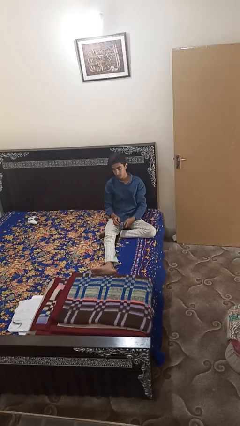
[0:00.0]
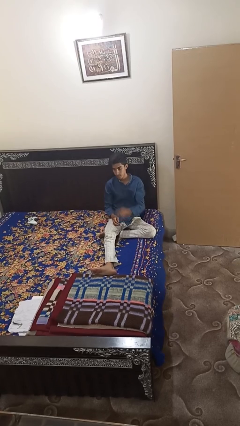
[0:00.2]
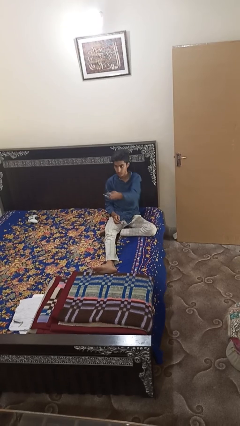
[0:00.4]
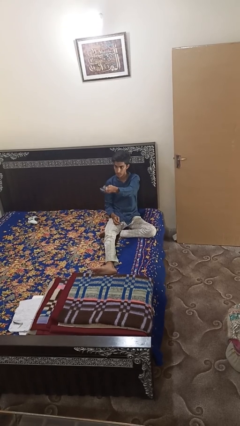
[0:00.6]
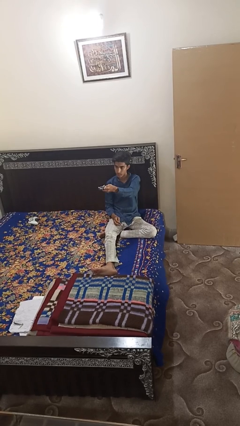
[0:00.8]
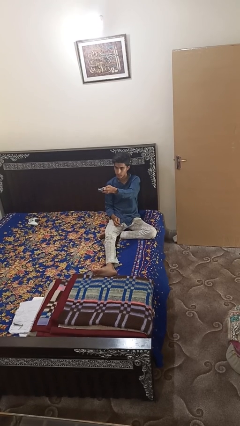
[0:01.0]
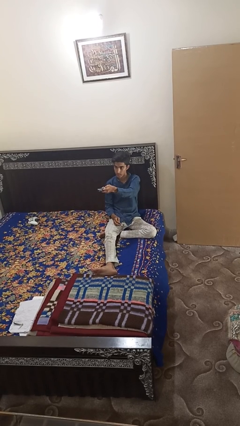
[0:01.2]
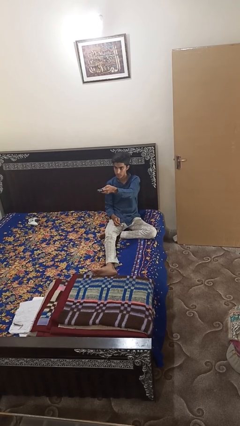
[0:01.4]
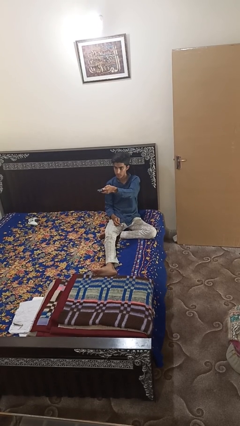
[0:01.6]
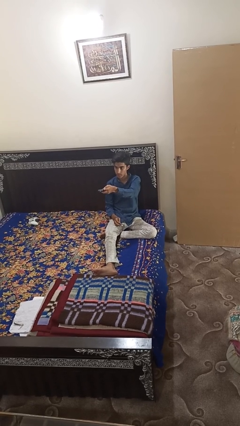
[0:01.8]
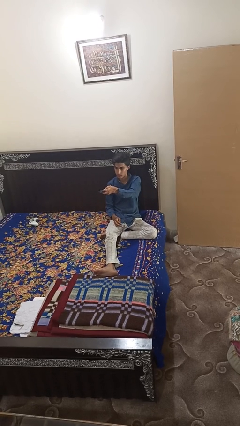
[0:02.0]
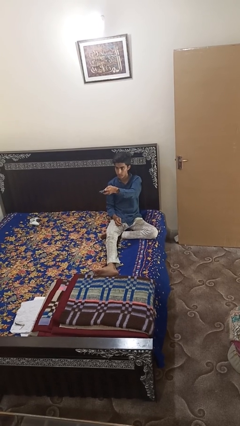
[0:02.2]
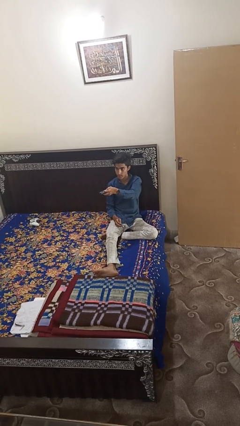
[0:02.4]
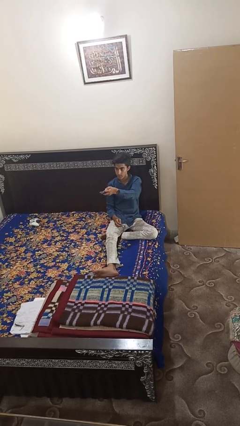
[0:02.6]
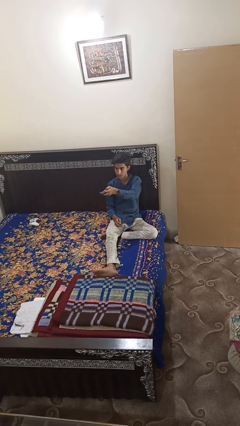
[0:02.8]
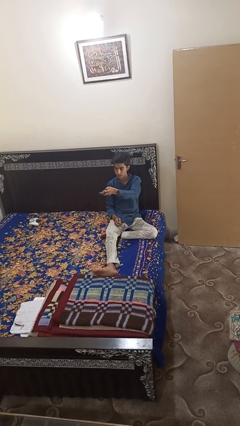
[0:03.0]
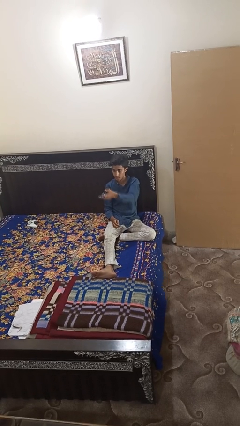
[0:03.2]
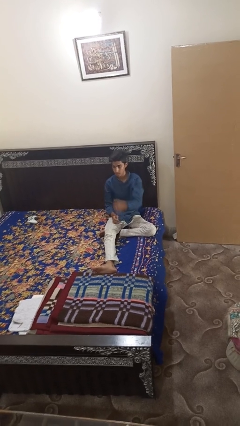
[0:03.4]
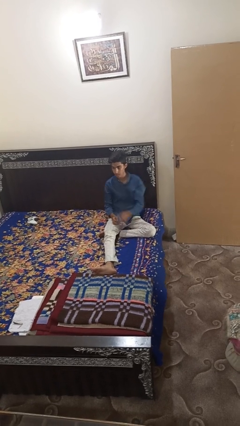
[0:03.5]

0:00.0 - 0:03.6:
person uses television remote

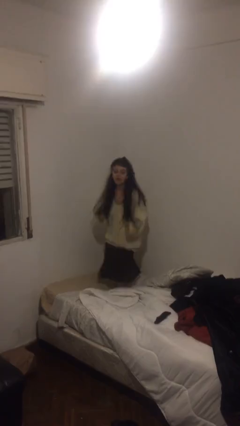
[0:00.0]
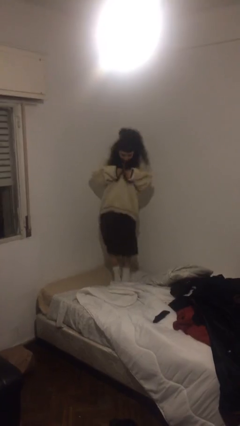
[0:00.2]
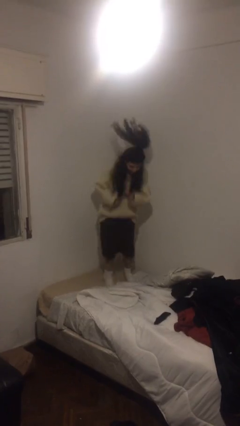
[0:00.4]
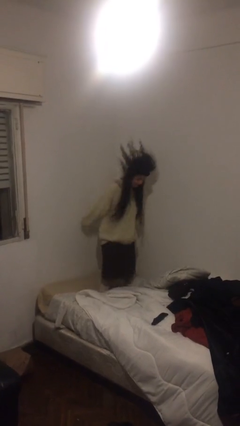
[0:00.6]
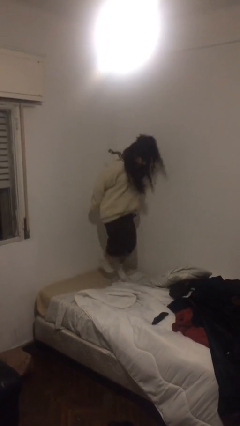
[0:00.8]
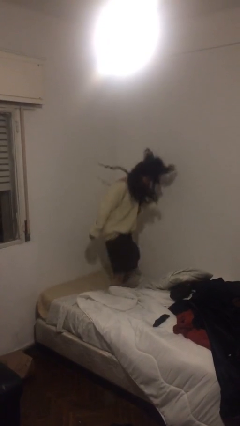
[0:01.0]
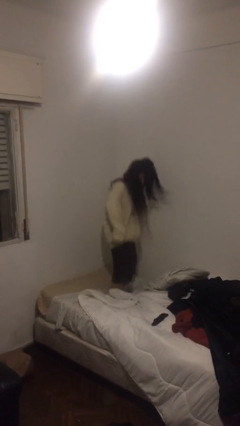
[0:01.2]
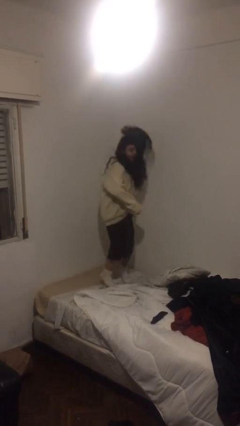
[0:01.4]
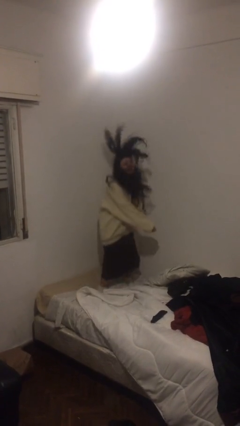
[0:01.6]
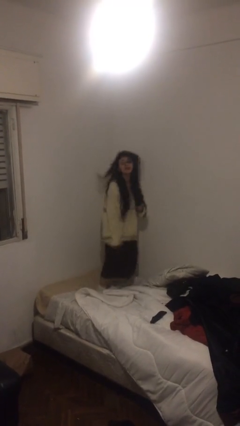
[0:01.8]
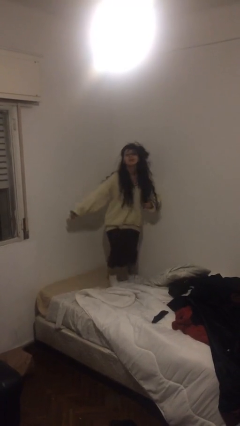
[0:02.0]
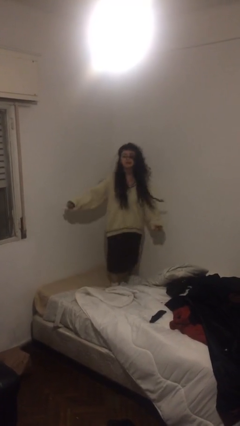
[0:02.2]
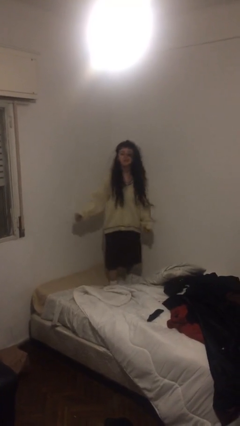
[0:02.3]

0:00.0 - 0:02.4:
person jumps on bed

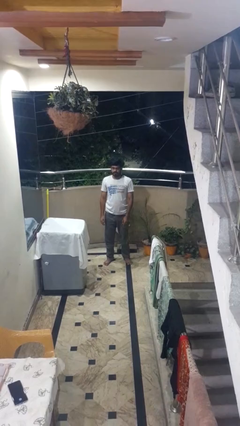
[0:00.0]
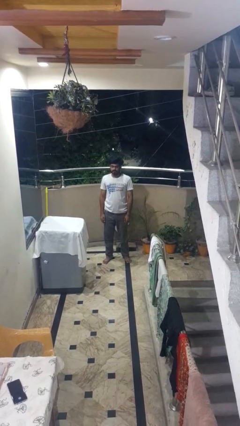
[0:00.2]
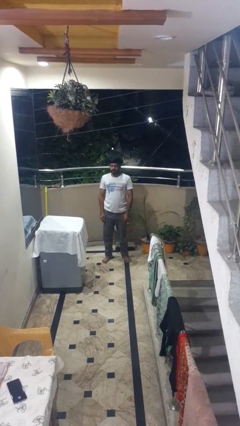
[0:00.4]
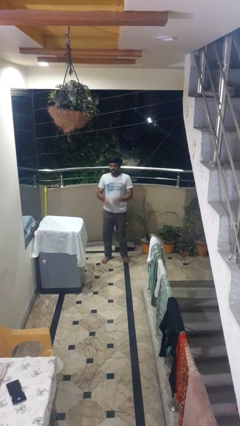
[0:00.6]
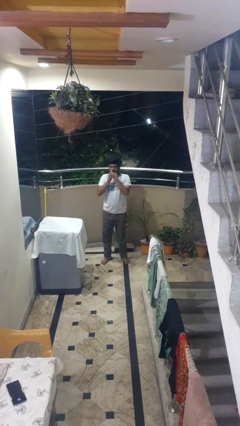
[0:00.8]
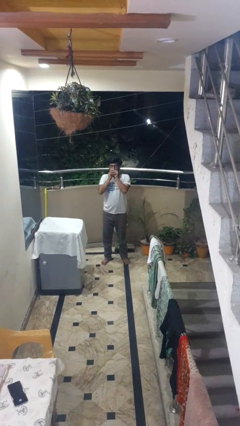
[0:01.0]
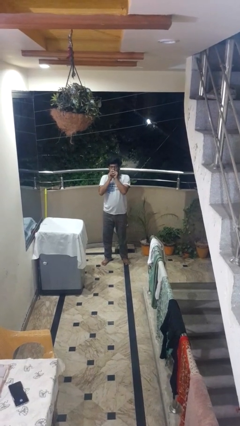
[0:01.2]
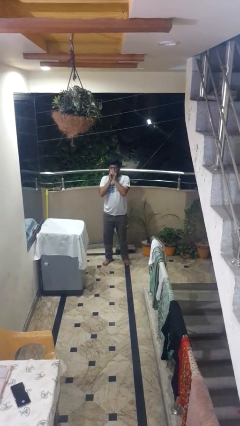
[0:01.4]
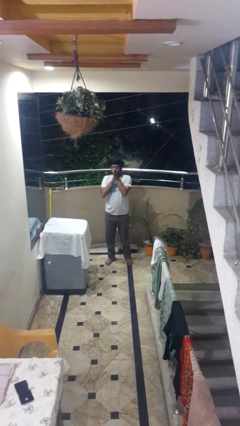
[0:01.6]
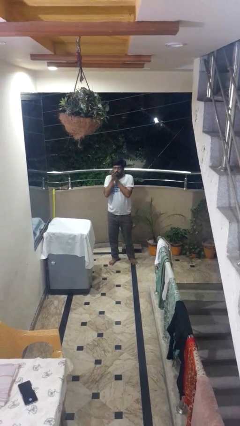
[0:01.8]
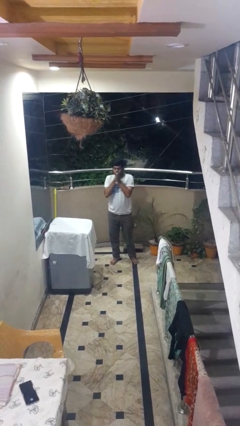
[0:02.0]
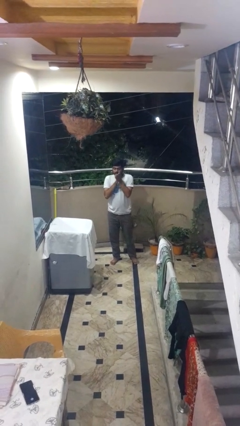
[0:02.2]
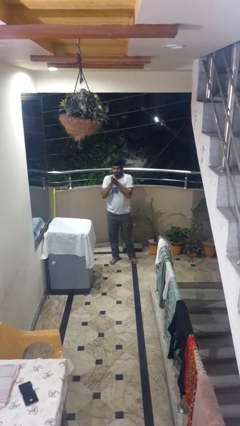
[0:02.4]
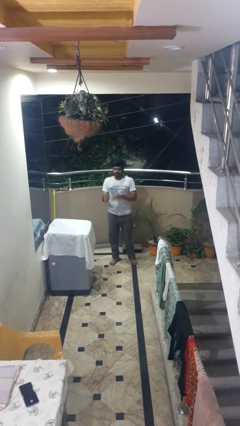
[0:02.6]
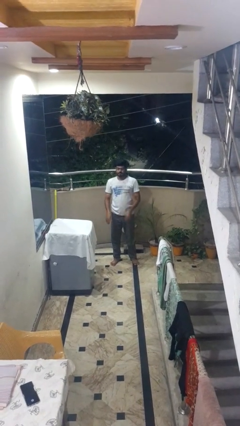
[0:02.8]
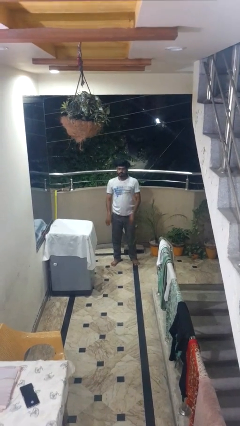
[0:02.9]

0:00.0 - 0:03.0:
person blows into hands

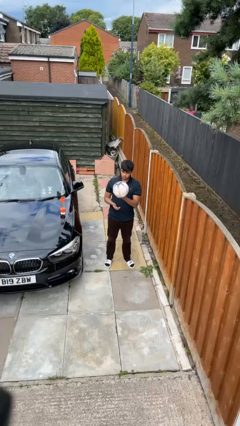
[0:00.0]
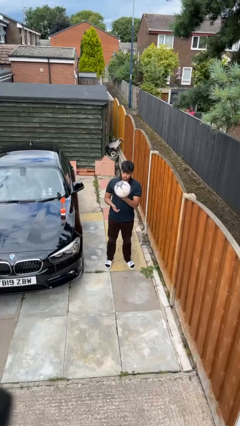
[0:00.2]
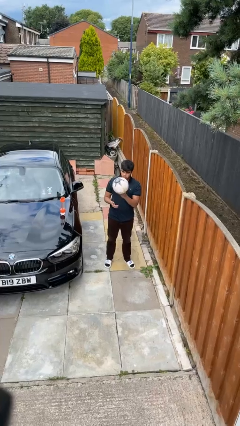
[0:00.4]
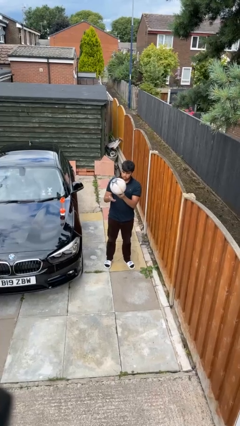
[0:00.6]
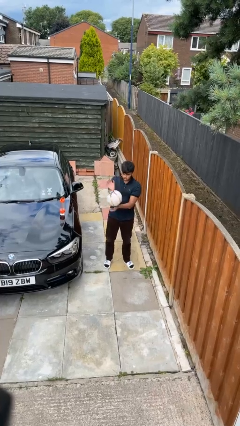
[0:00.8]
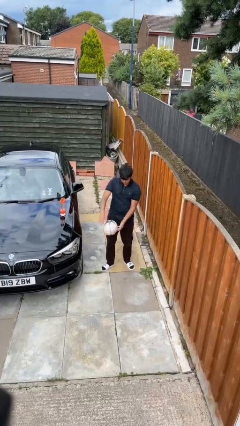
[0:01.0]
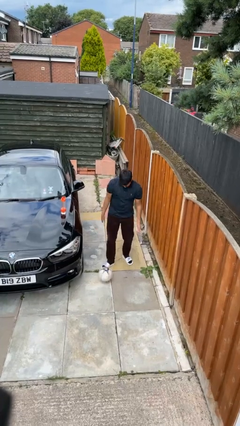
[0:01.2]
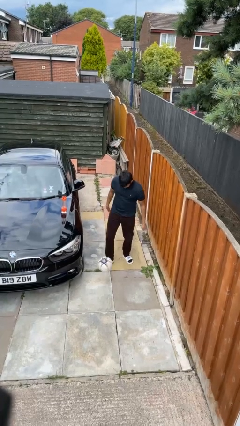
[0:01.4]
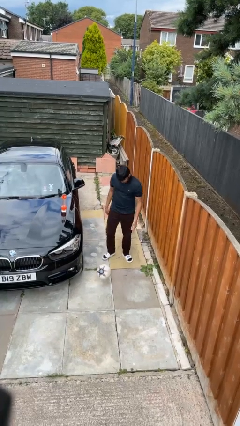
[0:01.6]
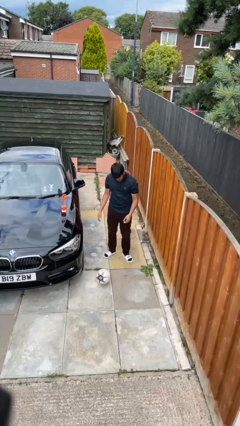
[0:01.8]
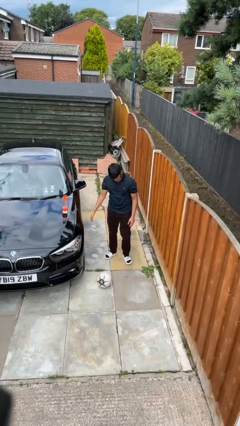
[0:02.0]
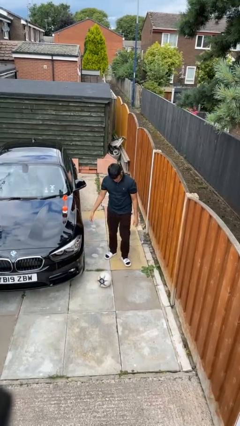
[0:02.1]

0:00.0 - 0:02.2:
person drops object

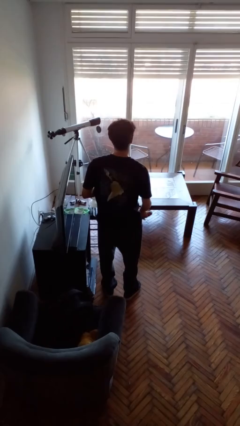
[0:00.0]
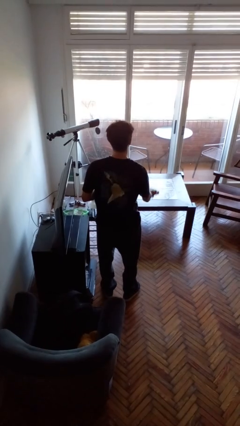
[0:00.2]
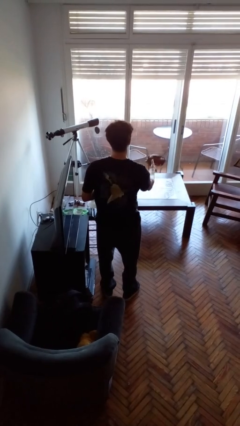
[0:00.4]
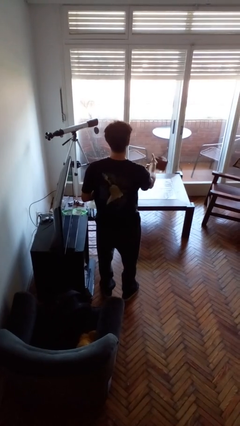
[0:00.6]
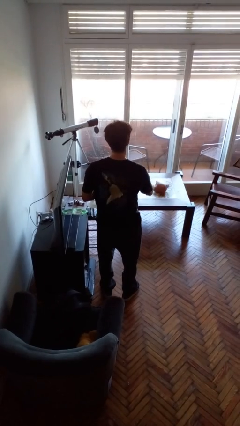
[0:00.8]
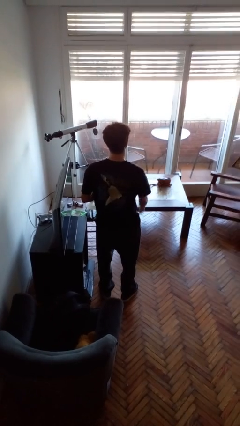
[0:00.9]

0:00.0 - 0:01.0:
person throws object on table

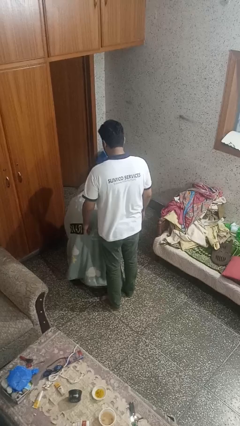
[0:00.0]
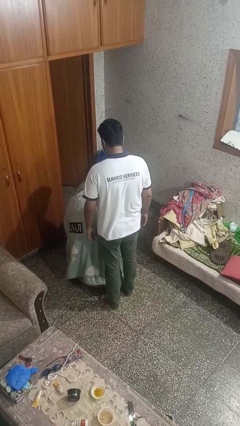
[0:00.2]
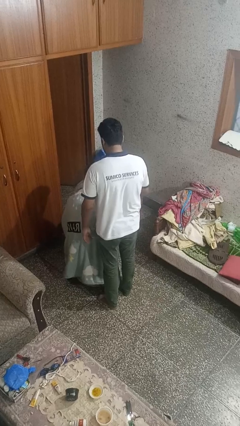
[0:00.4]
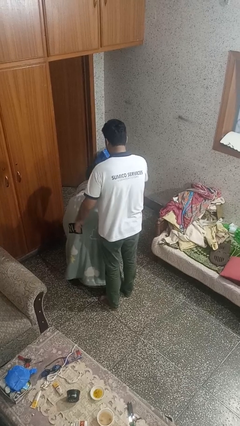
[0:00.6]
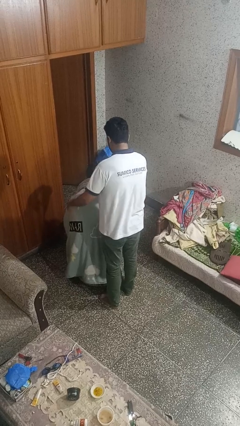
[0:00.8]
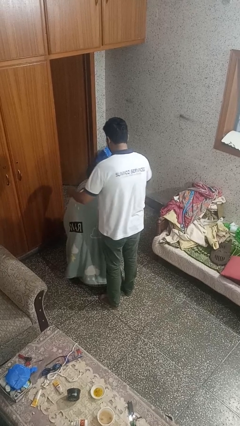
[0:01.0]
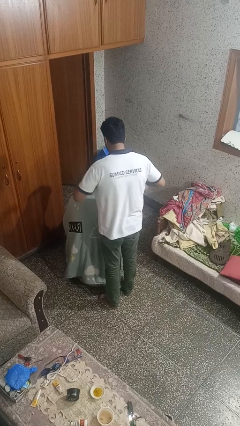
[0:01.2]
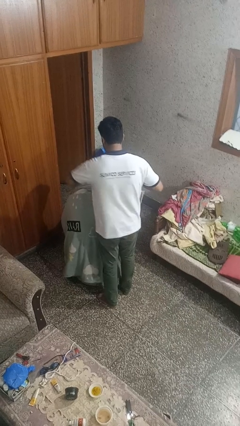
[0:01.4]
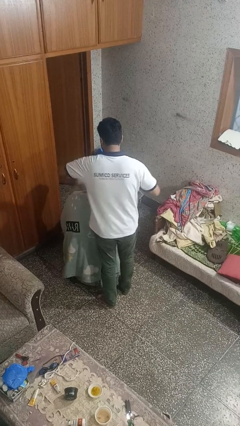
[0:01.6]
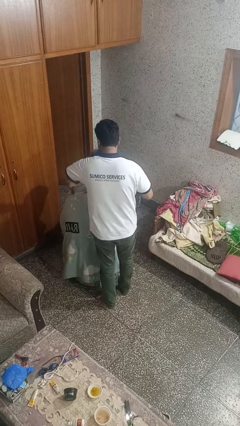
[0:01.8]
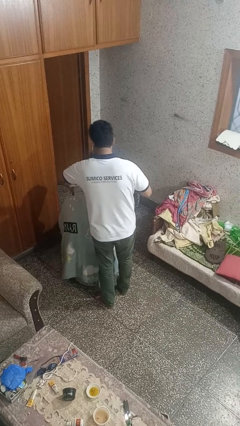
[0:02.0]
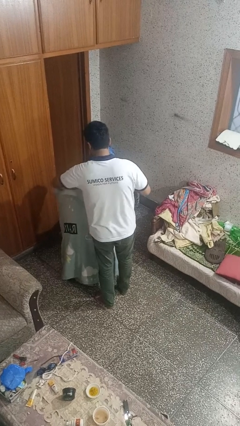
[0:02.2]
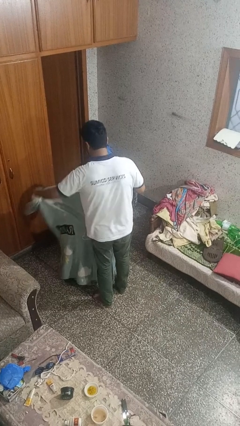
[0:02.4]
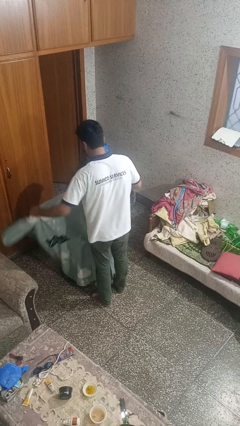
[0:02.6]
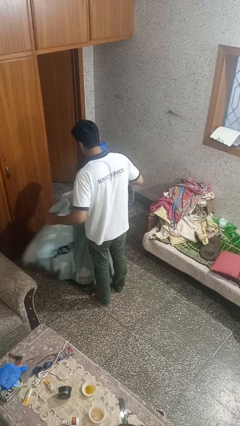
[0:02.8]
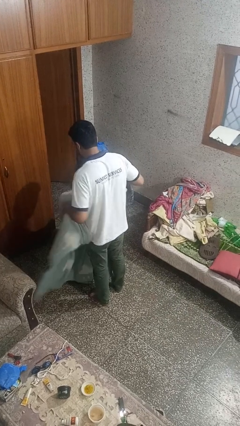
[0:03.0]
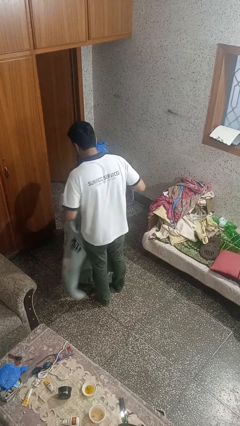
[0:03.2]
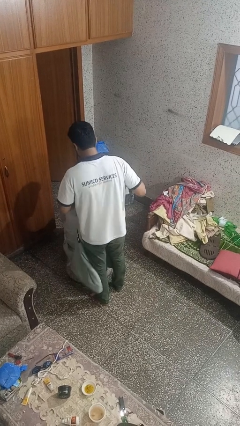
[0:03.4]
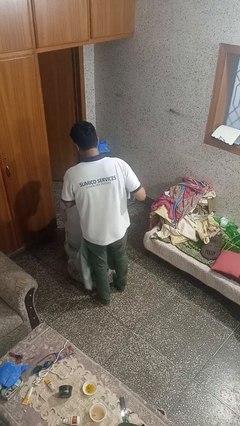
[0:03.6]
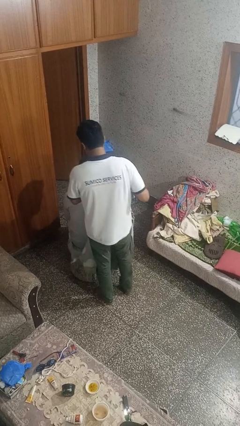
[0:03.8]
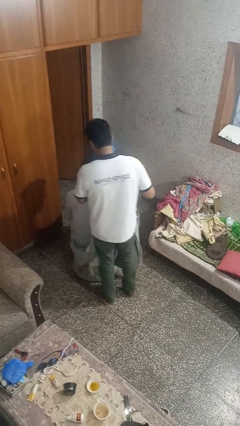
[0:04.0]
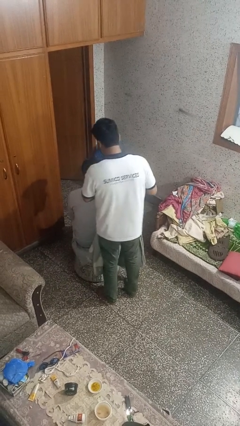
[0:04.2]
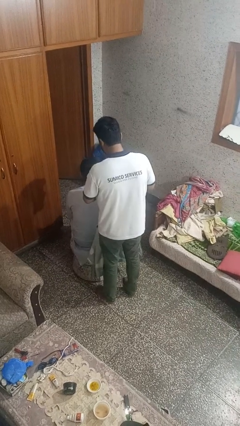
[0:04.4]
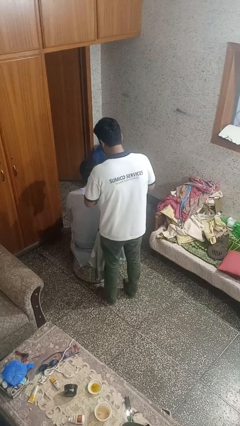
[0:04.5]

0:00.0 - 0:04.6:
person uncovers friend with blanket

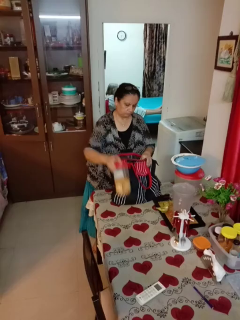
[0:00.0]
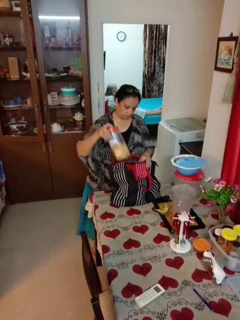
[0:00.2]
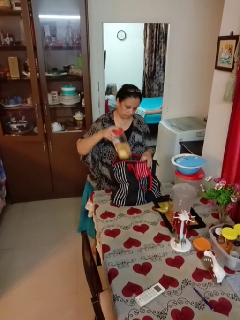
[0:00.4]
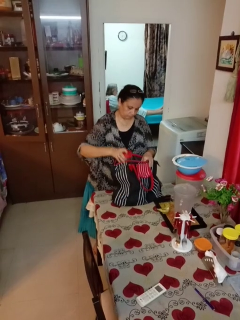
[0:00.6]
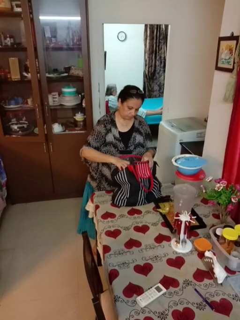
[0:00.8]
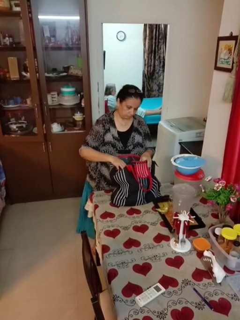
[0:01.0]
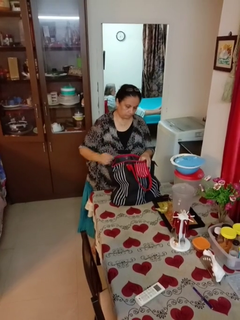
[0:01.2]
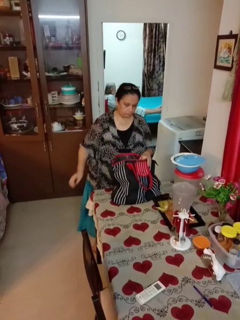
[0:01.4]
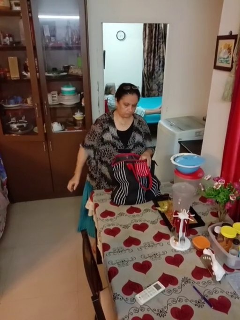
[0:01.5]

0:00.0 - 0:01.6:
person puts object into bag
